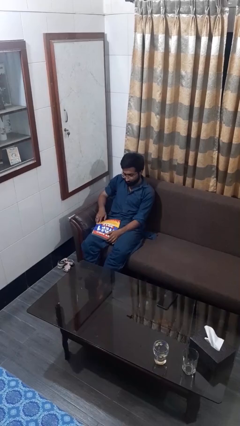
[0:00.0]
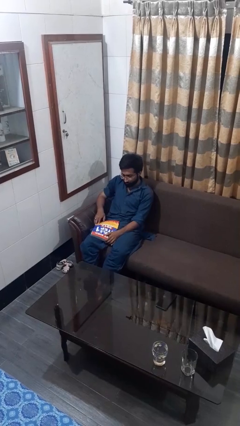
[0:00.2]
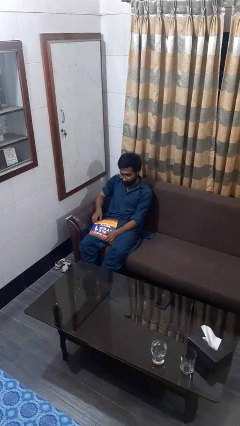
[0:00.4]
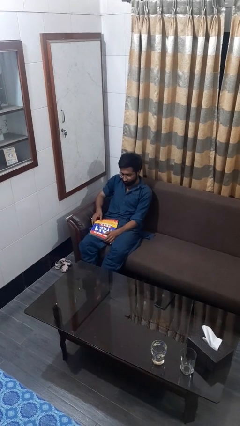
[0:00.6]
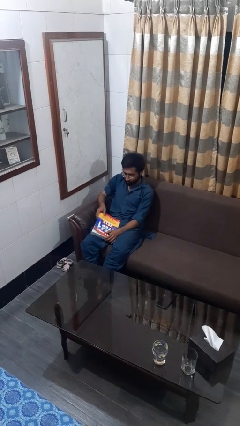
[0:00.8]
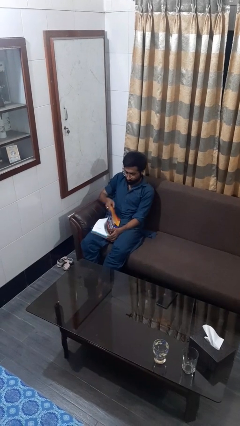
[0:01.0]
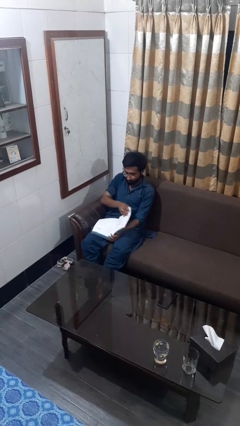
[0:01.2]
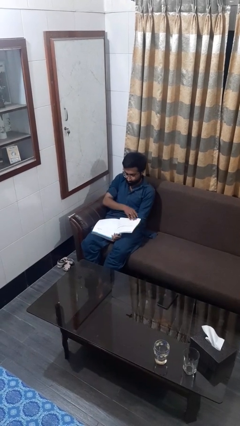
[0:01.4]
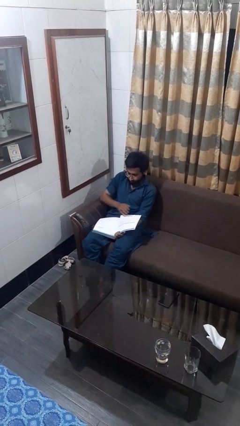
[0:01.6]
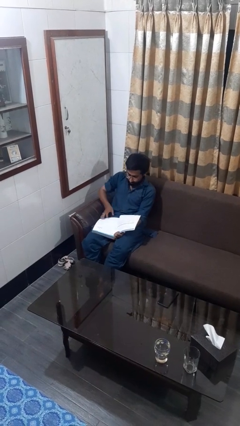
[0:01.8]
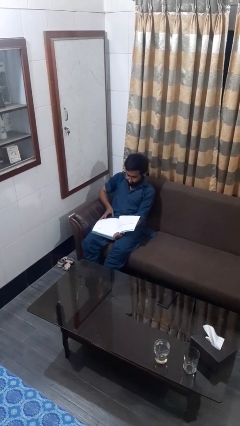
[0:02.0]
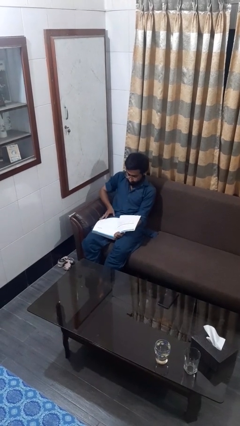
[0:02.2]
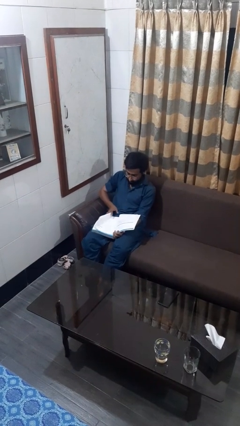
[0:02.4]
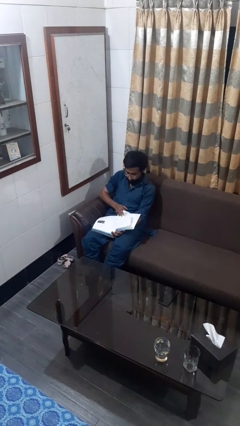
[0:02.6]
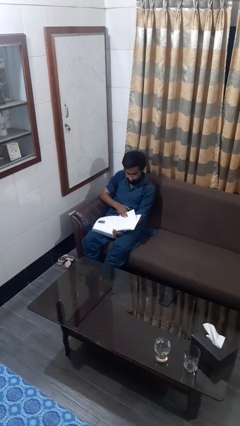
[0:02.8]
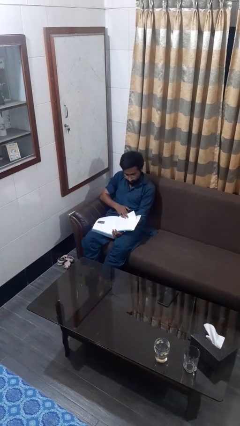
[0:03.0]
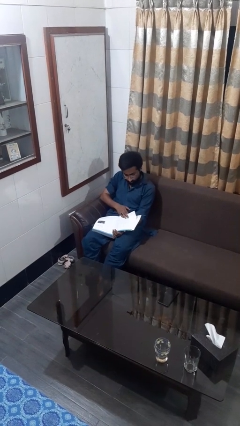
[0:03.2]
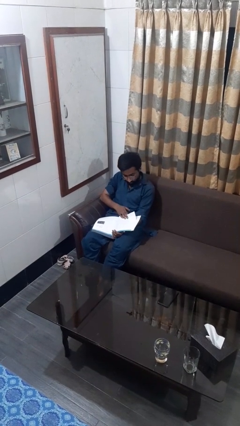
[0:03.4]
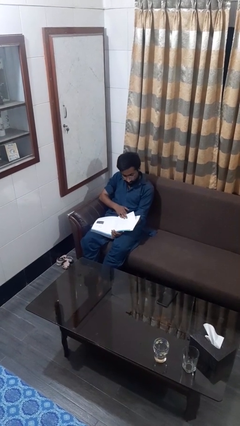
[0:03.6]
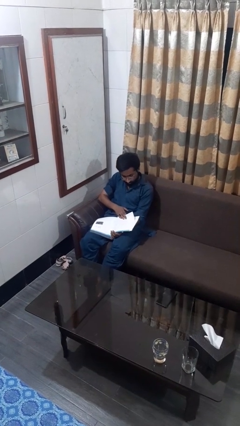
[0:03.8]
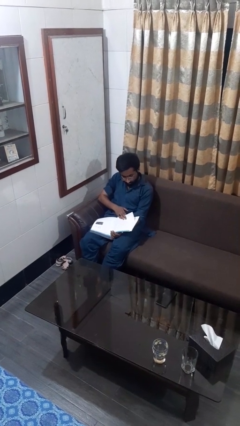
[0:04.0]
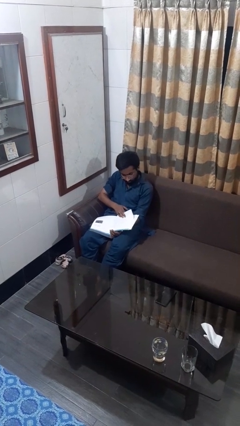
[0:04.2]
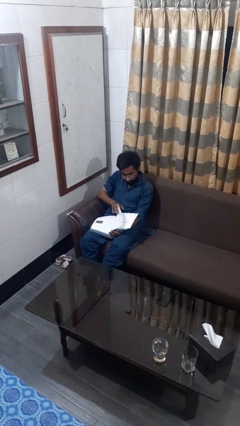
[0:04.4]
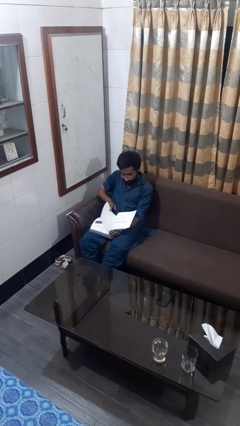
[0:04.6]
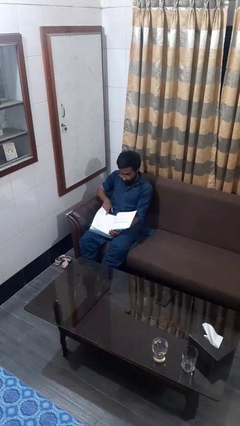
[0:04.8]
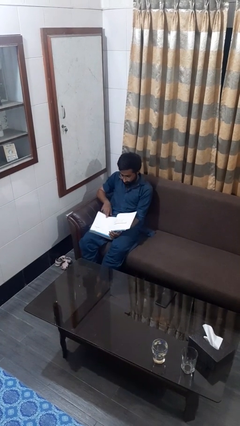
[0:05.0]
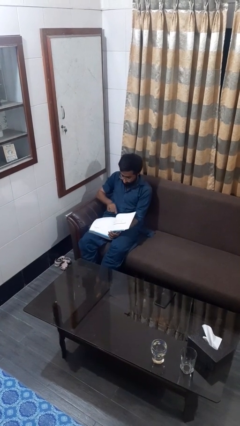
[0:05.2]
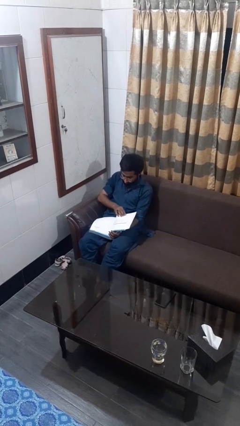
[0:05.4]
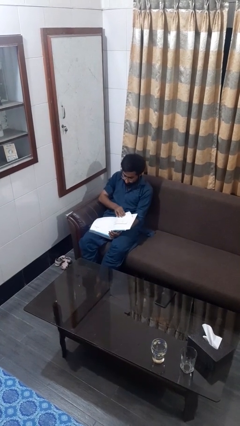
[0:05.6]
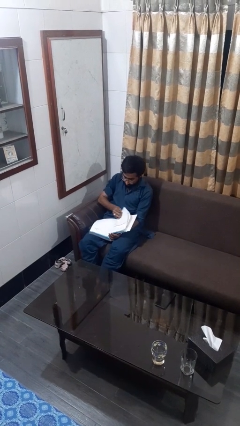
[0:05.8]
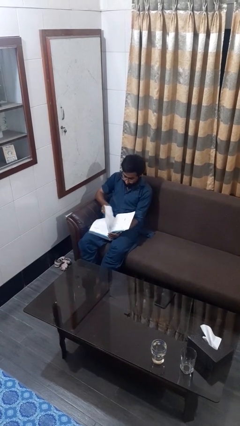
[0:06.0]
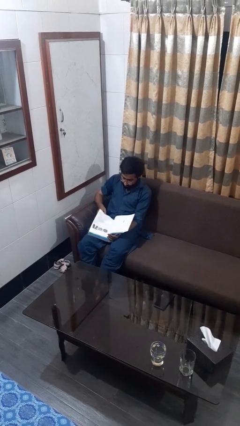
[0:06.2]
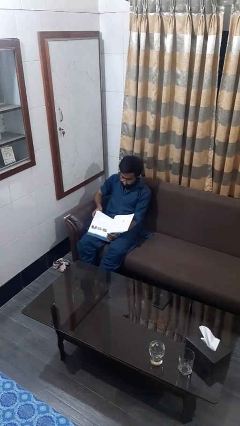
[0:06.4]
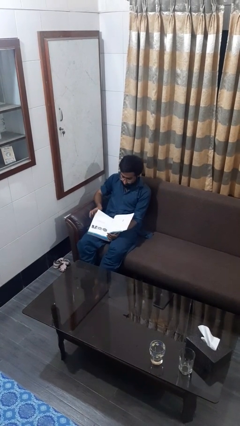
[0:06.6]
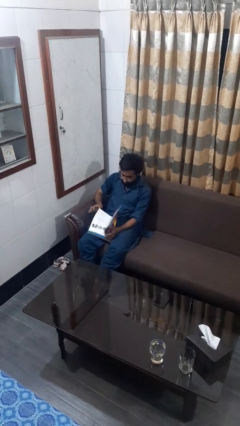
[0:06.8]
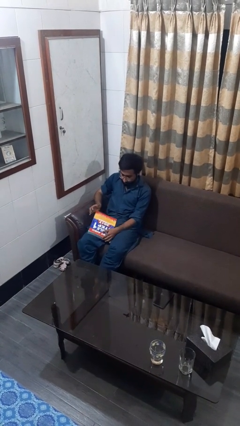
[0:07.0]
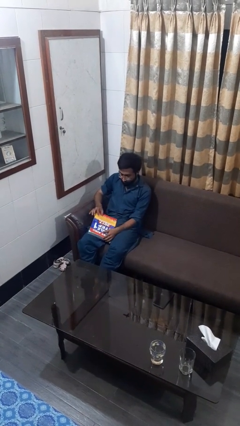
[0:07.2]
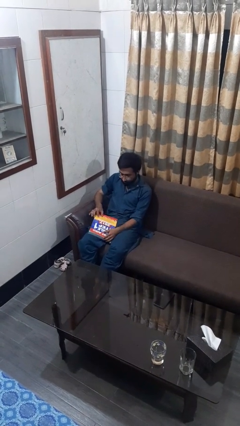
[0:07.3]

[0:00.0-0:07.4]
person reads book

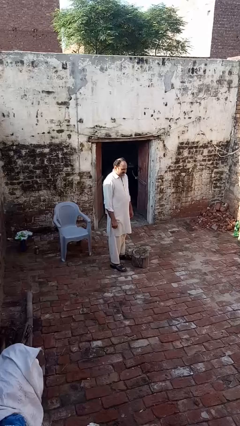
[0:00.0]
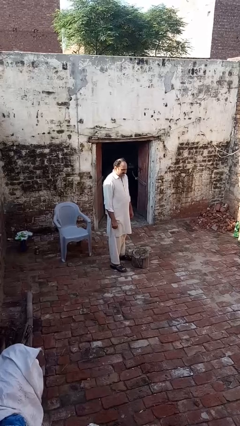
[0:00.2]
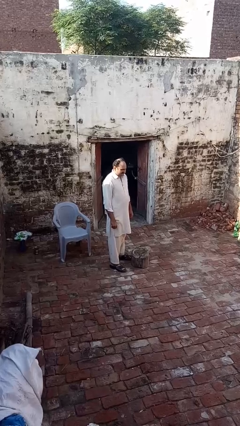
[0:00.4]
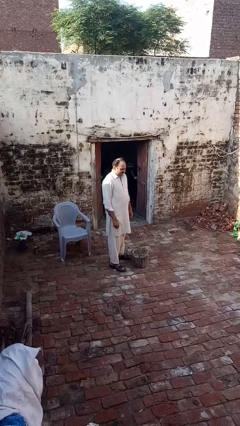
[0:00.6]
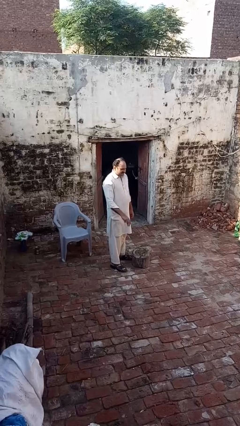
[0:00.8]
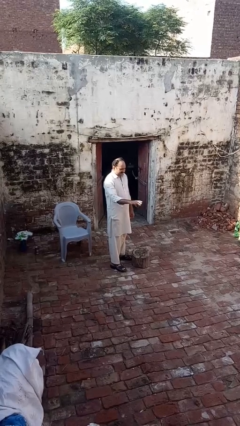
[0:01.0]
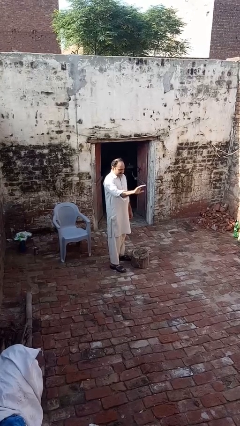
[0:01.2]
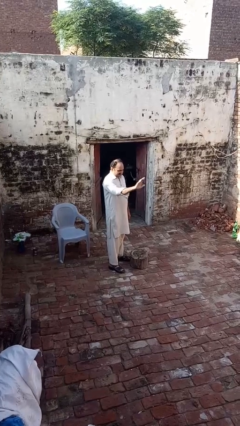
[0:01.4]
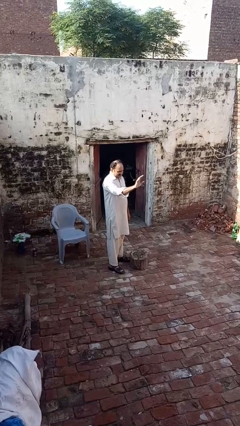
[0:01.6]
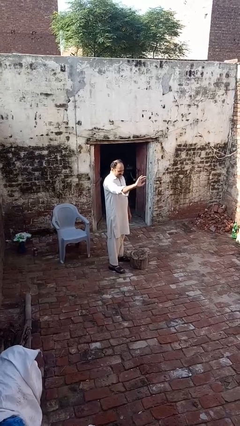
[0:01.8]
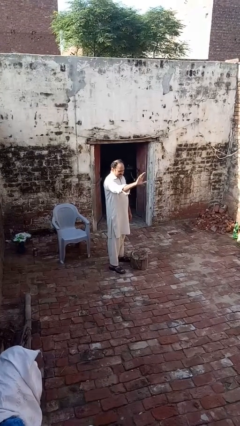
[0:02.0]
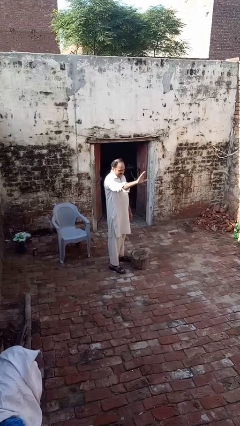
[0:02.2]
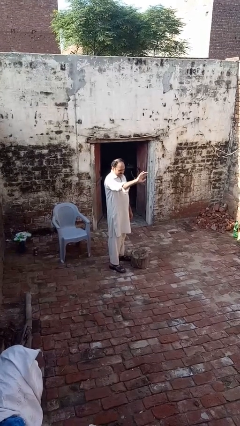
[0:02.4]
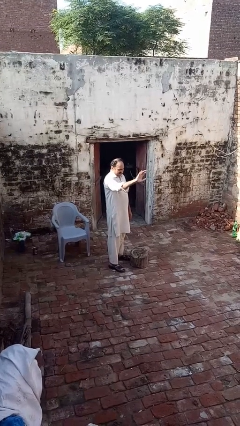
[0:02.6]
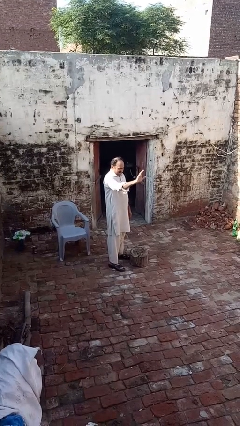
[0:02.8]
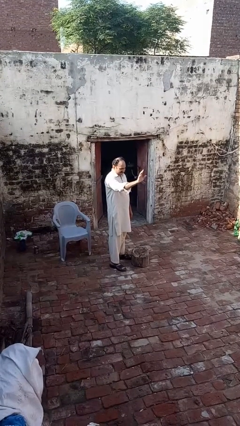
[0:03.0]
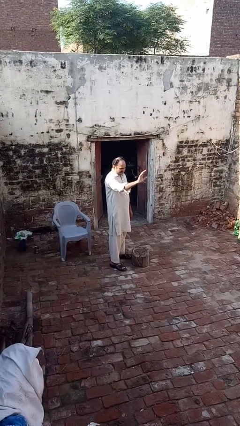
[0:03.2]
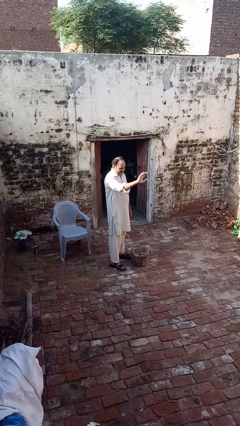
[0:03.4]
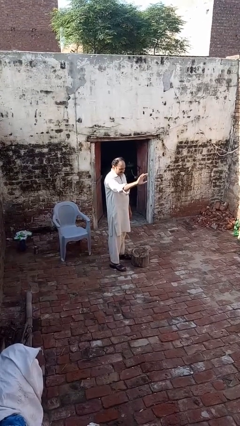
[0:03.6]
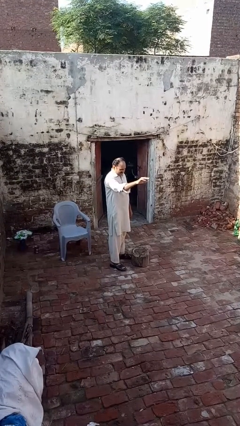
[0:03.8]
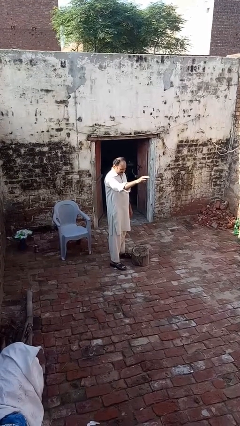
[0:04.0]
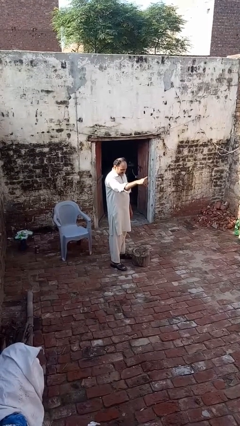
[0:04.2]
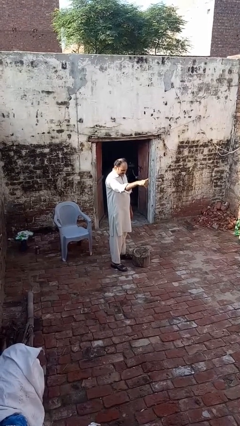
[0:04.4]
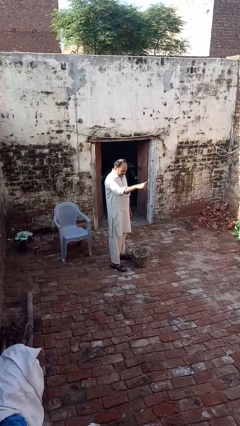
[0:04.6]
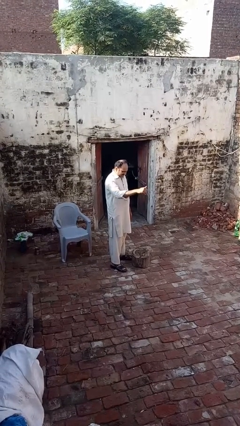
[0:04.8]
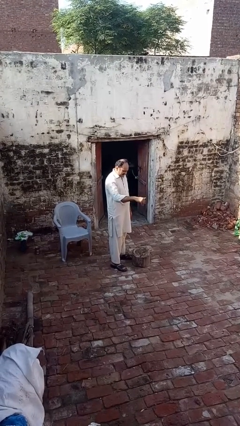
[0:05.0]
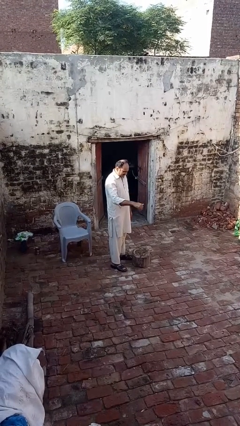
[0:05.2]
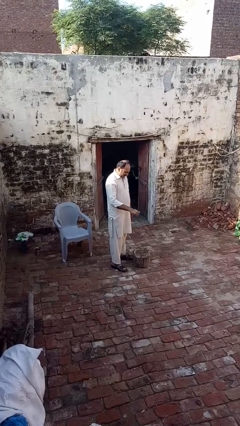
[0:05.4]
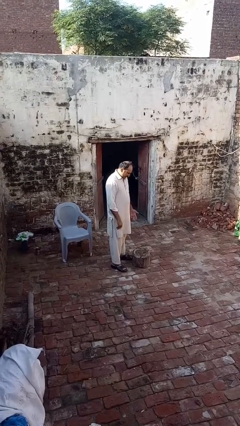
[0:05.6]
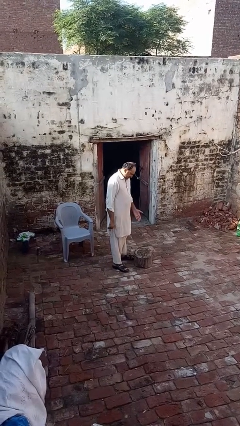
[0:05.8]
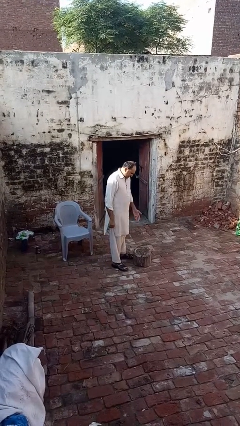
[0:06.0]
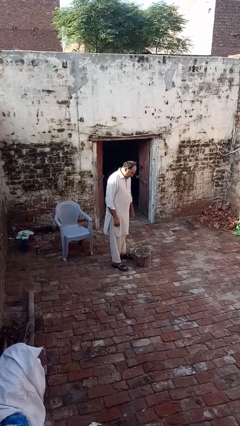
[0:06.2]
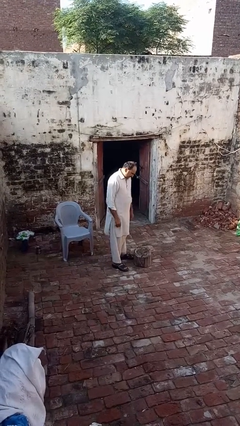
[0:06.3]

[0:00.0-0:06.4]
person waves hand over object

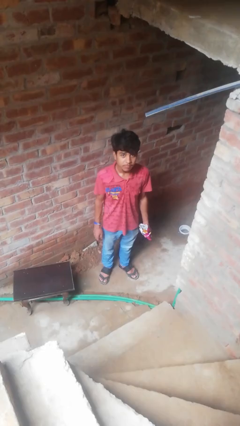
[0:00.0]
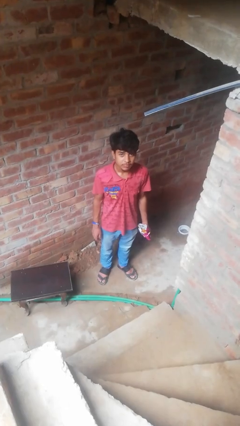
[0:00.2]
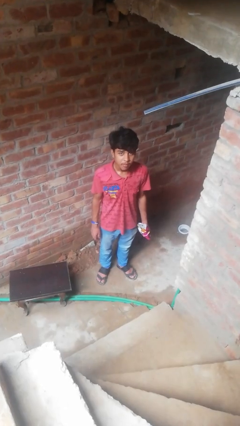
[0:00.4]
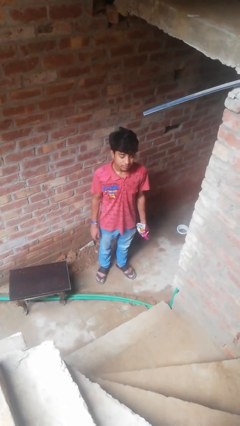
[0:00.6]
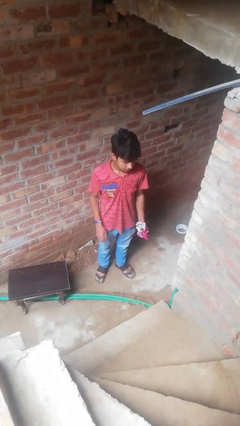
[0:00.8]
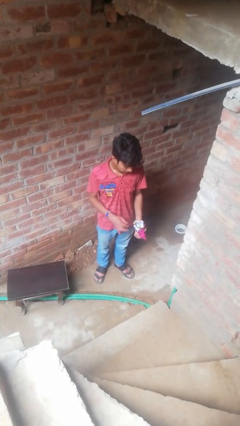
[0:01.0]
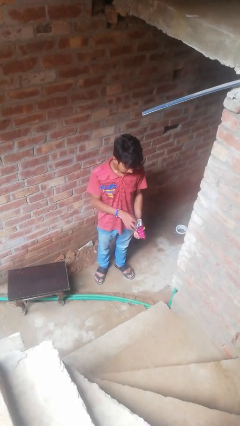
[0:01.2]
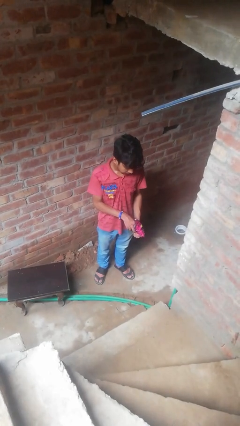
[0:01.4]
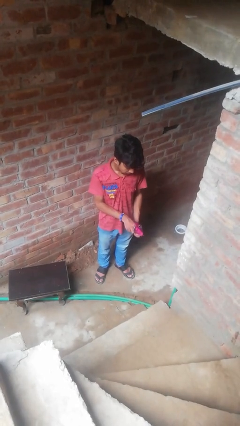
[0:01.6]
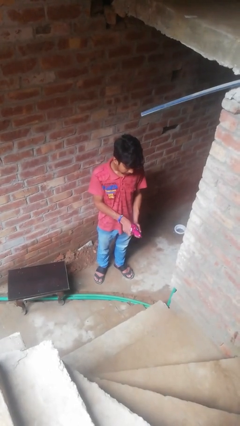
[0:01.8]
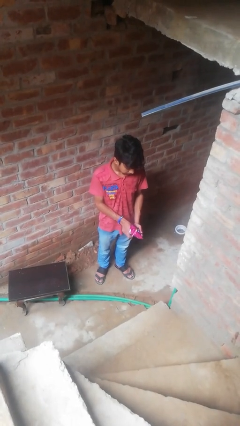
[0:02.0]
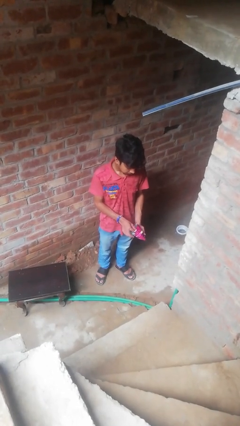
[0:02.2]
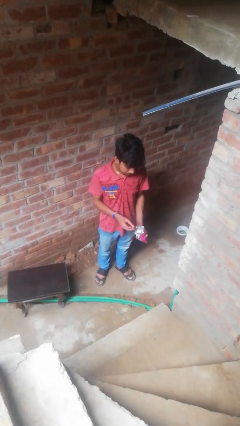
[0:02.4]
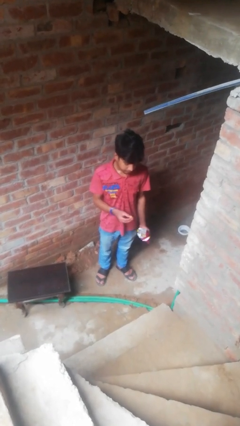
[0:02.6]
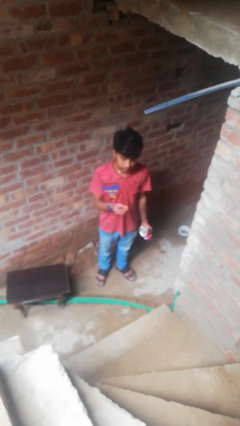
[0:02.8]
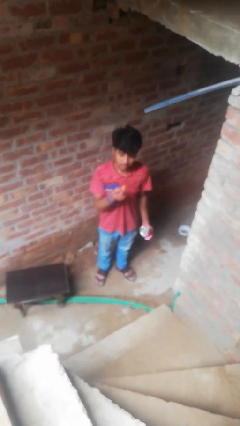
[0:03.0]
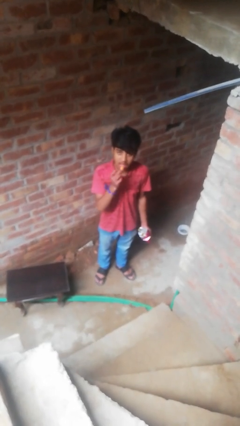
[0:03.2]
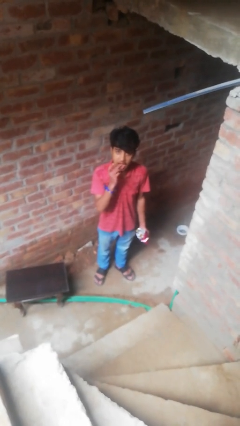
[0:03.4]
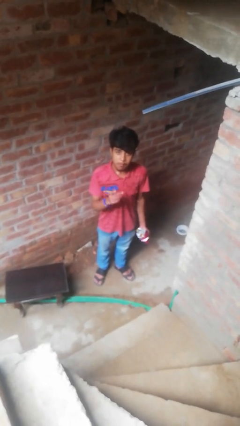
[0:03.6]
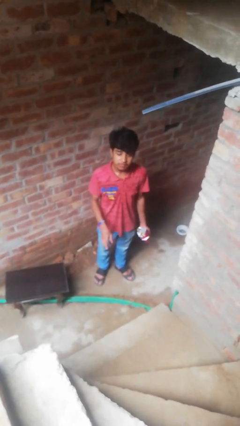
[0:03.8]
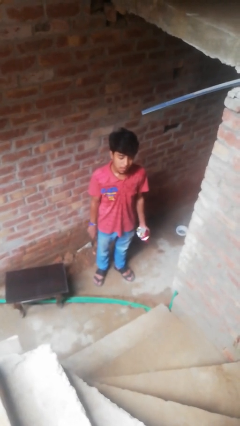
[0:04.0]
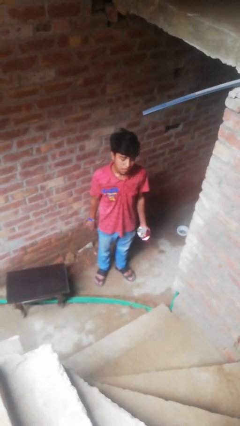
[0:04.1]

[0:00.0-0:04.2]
person eats snack from bag
